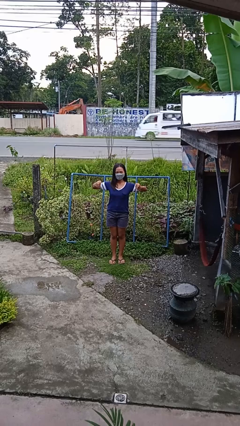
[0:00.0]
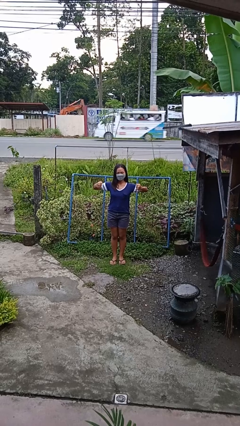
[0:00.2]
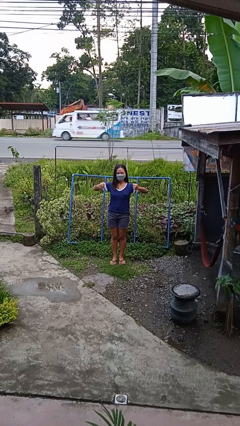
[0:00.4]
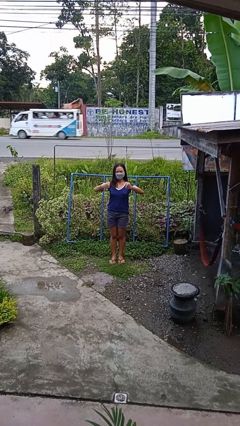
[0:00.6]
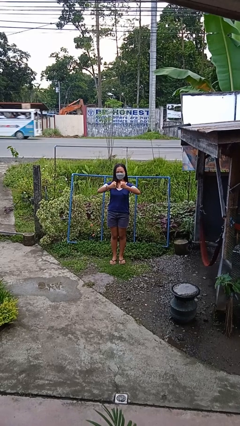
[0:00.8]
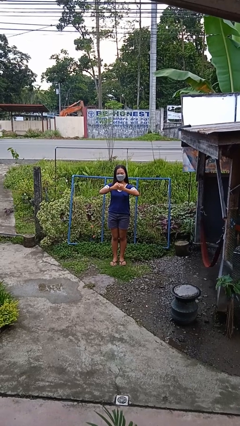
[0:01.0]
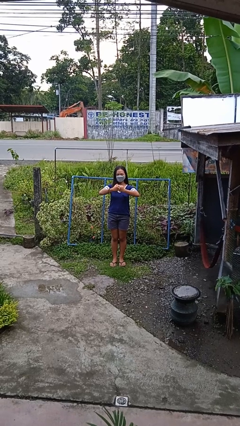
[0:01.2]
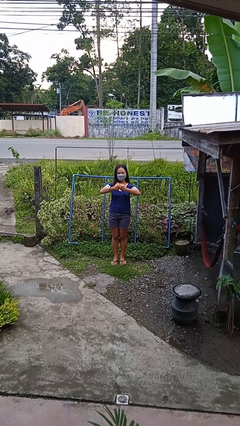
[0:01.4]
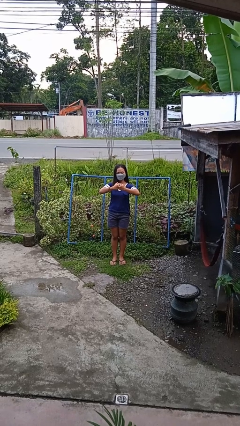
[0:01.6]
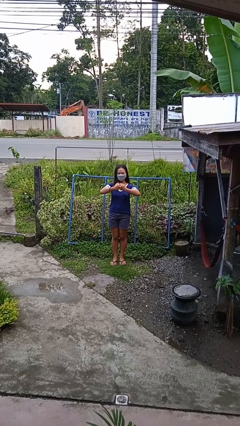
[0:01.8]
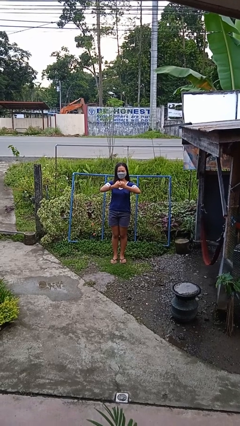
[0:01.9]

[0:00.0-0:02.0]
person gestures zoom out

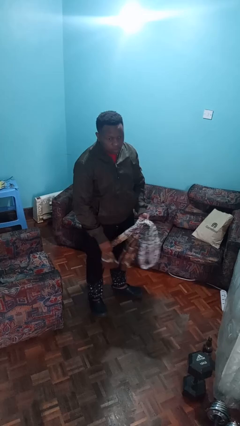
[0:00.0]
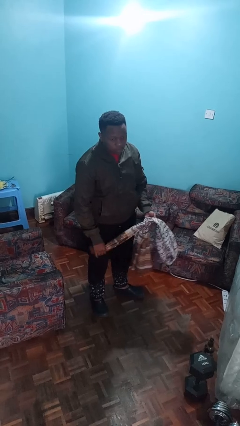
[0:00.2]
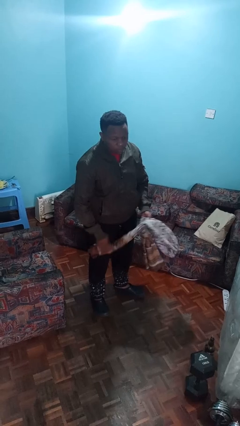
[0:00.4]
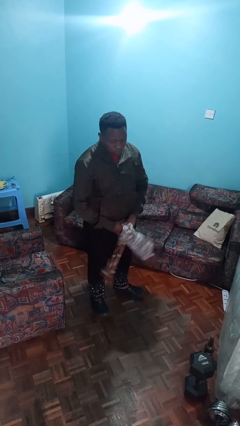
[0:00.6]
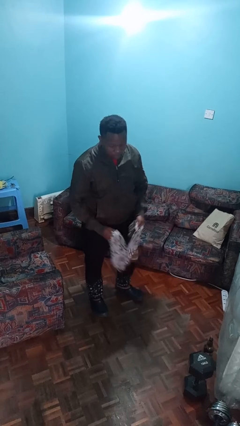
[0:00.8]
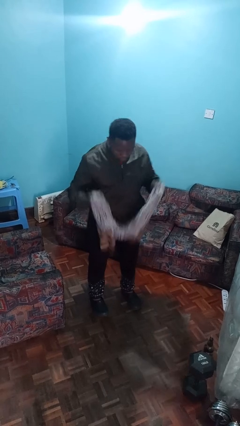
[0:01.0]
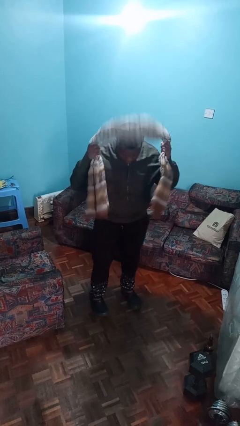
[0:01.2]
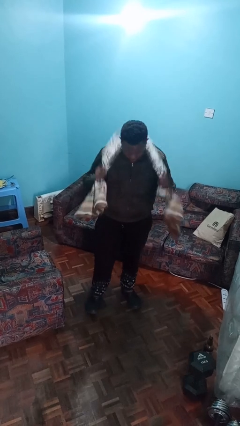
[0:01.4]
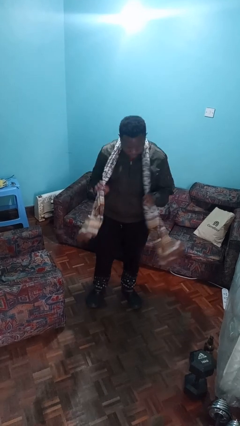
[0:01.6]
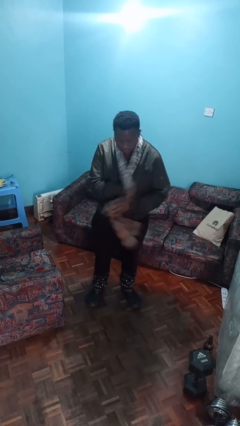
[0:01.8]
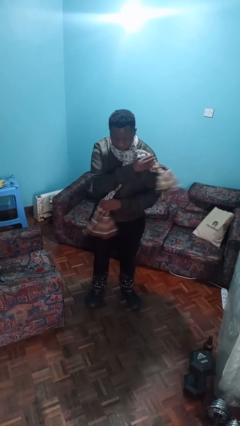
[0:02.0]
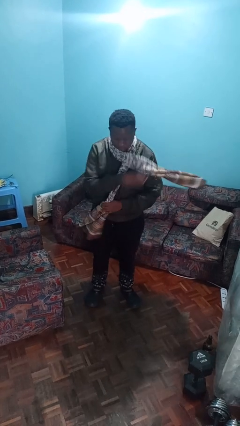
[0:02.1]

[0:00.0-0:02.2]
person puts on scarf

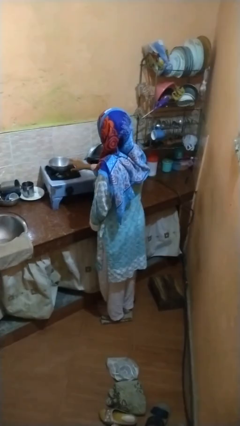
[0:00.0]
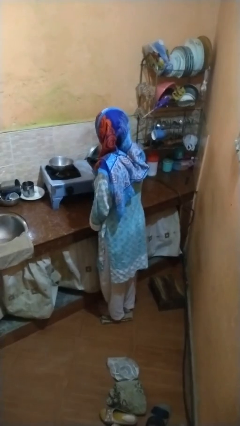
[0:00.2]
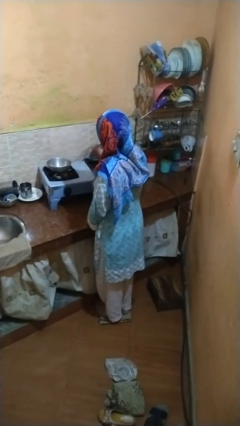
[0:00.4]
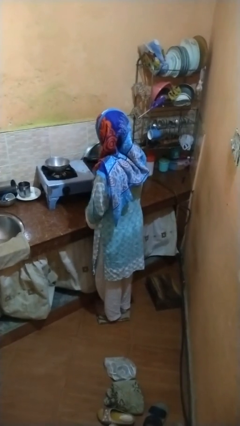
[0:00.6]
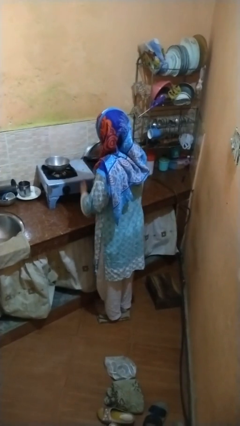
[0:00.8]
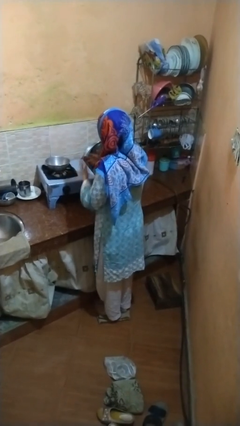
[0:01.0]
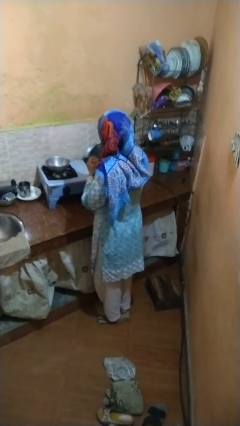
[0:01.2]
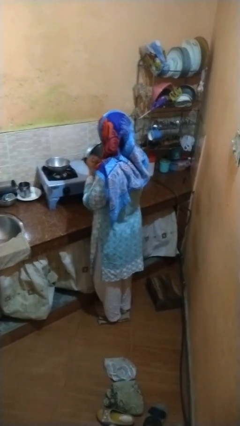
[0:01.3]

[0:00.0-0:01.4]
person burns hand

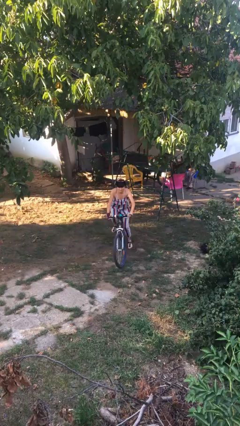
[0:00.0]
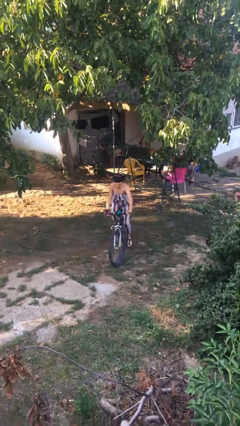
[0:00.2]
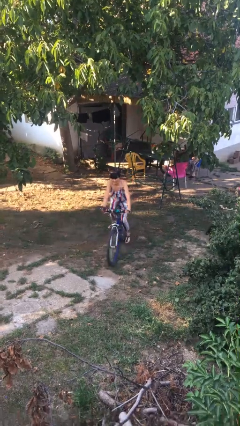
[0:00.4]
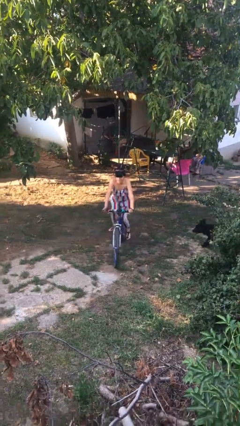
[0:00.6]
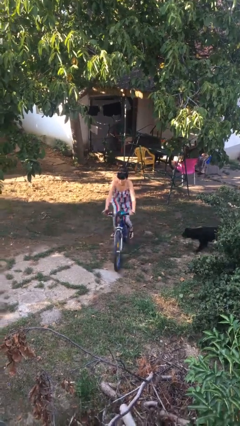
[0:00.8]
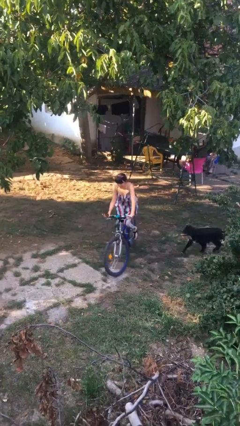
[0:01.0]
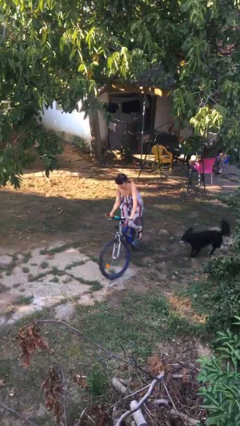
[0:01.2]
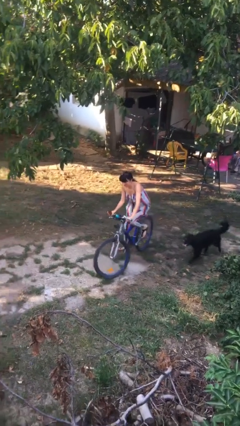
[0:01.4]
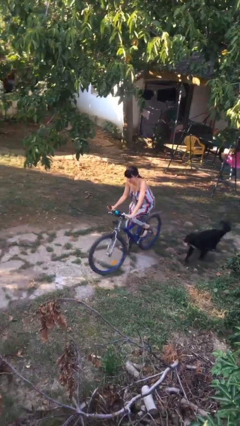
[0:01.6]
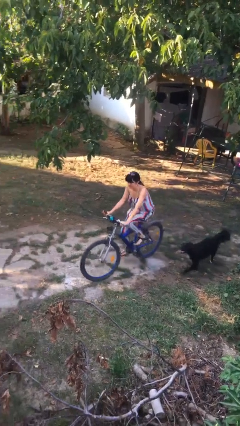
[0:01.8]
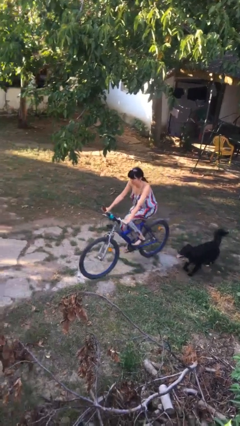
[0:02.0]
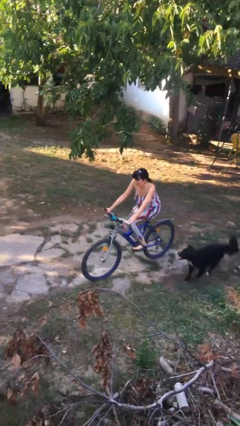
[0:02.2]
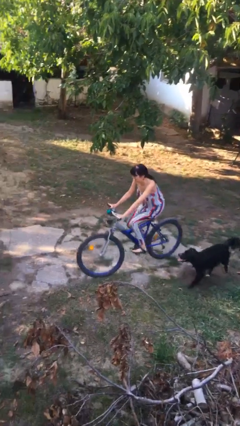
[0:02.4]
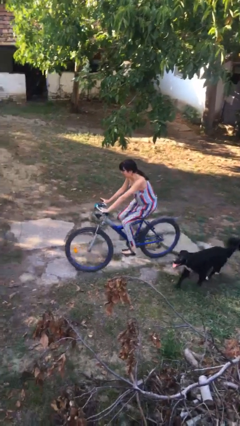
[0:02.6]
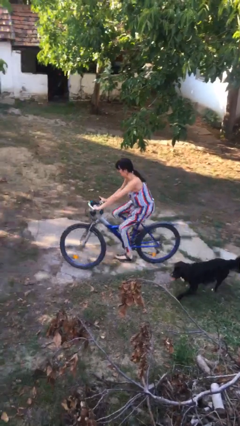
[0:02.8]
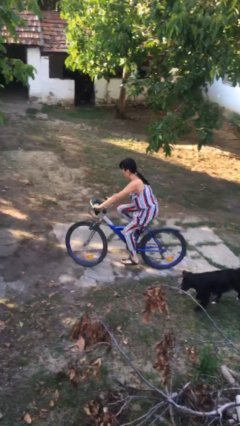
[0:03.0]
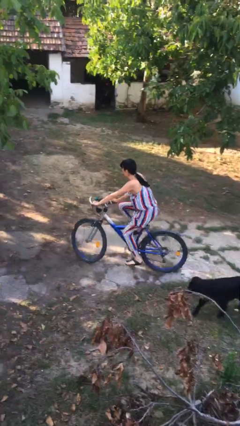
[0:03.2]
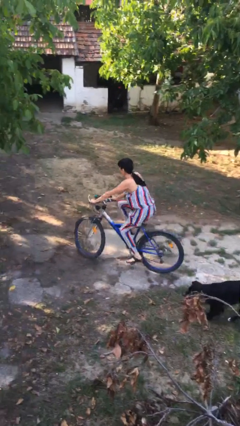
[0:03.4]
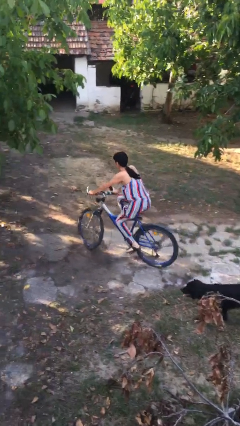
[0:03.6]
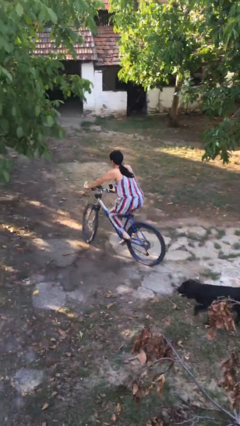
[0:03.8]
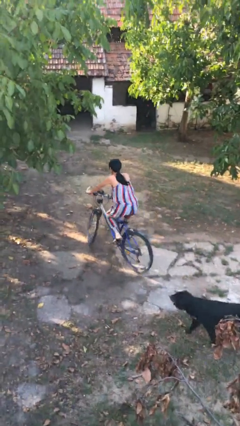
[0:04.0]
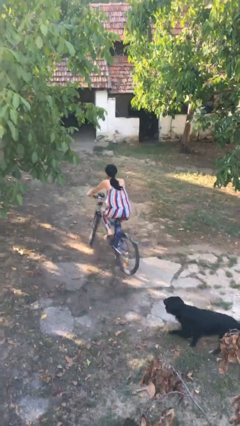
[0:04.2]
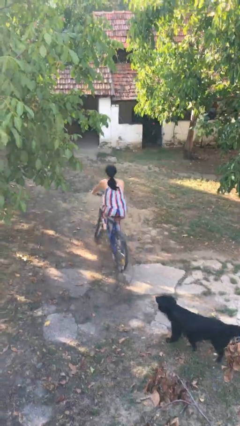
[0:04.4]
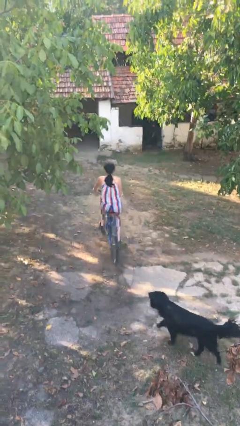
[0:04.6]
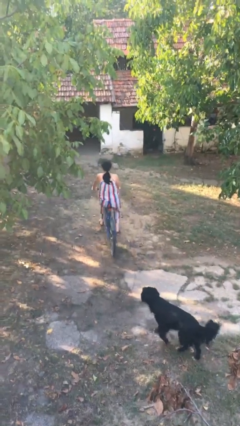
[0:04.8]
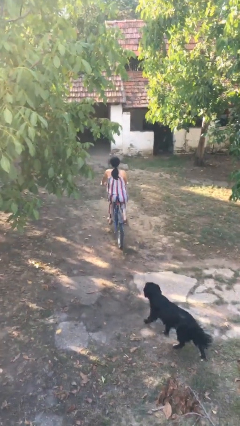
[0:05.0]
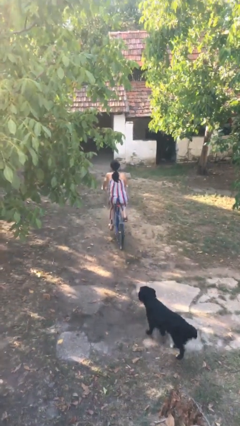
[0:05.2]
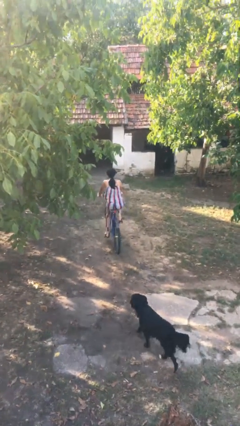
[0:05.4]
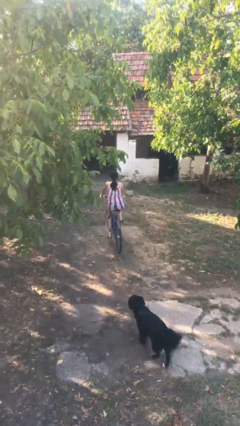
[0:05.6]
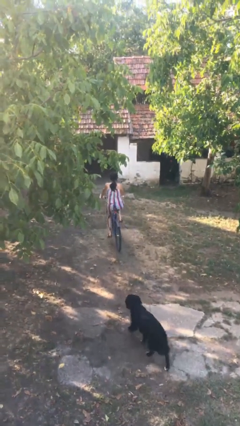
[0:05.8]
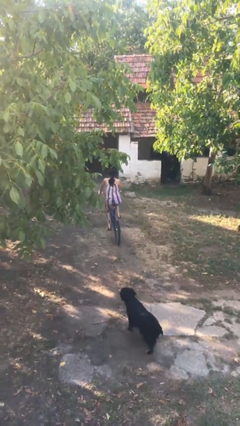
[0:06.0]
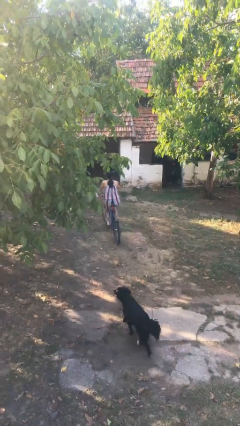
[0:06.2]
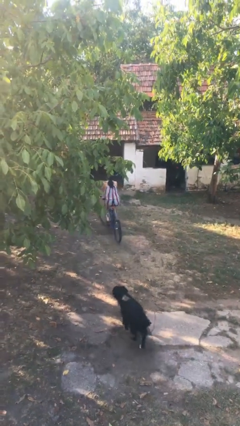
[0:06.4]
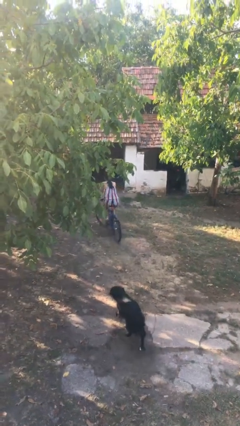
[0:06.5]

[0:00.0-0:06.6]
person rides bicycle

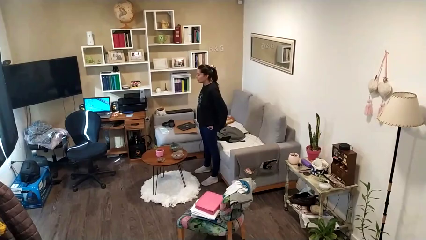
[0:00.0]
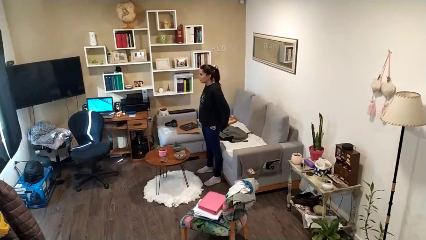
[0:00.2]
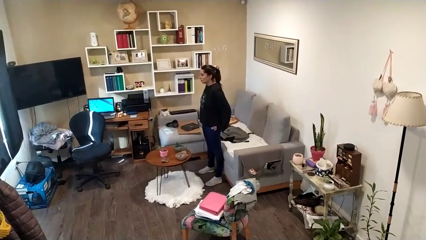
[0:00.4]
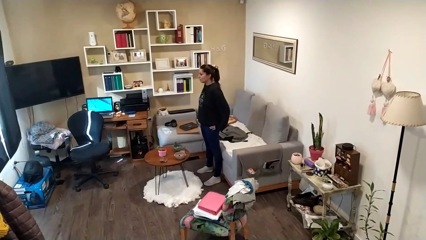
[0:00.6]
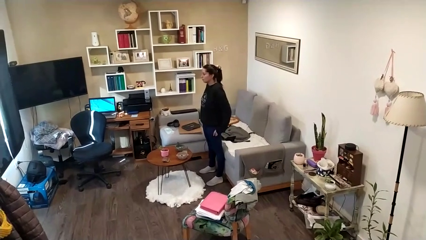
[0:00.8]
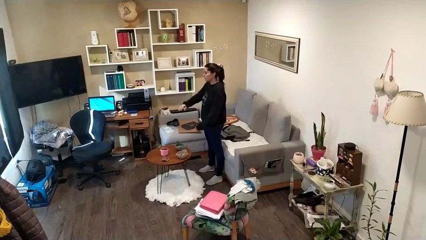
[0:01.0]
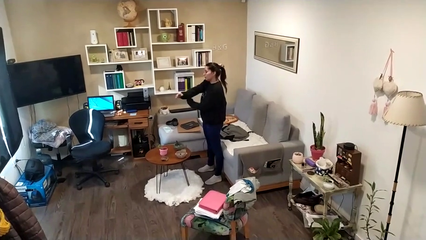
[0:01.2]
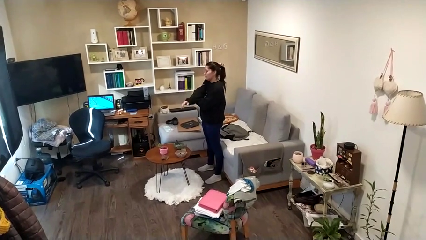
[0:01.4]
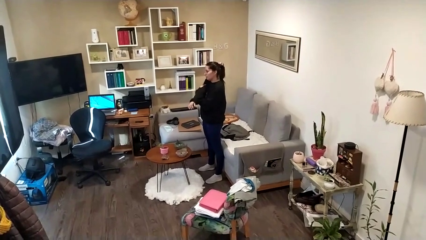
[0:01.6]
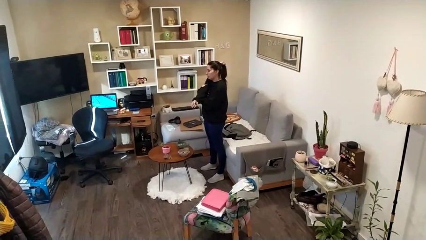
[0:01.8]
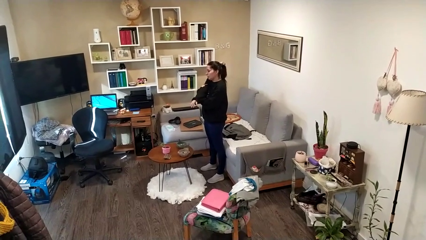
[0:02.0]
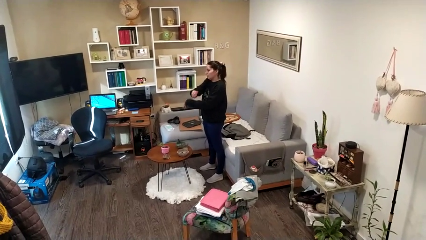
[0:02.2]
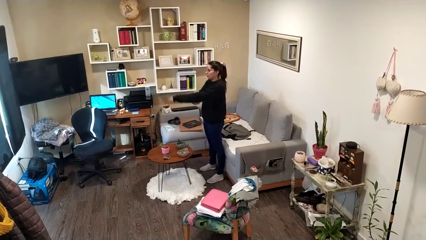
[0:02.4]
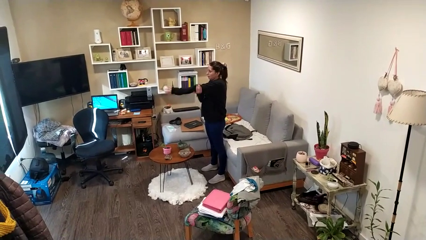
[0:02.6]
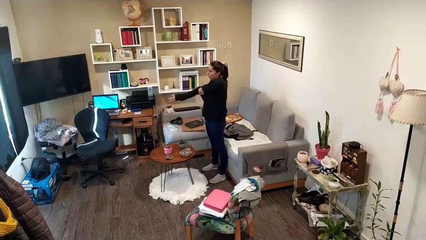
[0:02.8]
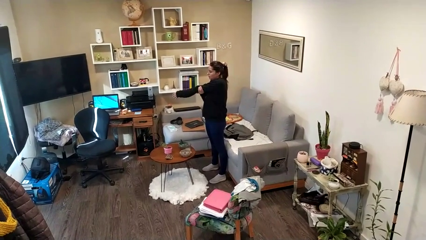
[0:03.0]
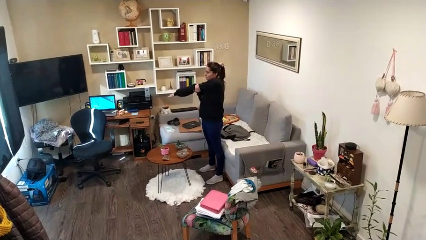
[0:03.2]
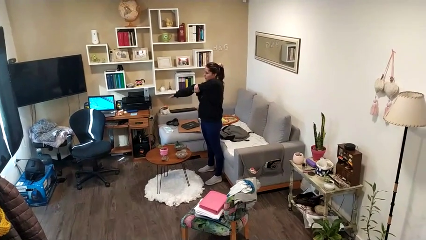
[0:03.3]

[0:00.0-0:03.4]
person stretches arms to side

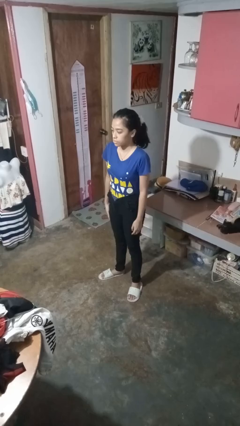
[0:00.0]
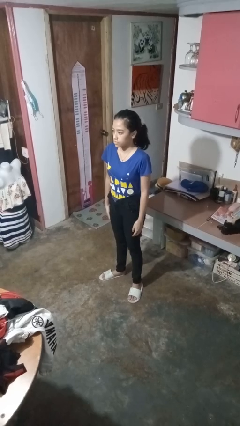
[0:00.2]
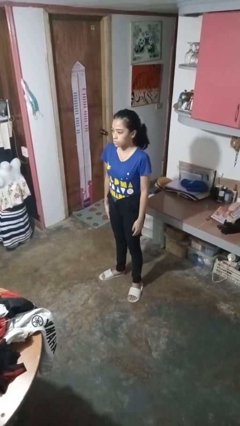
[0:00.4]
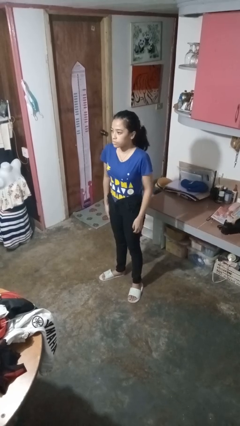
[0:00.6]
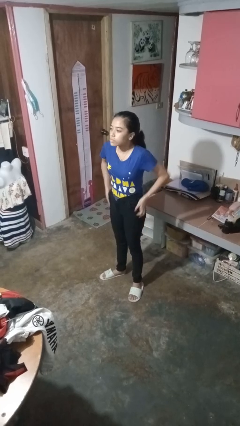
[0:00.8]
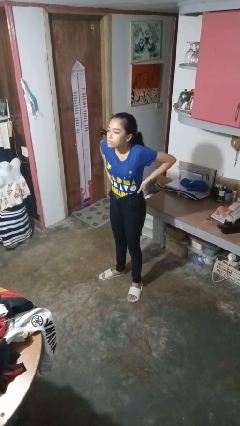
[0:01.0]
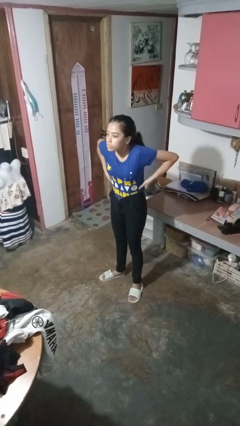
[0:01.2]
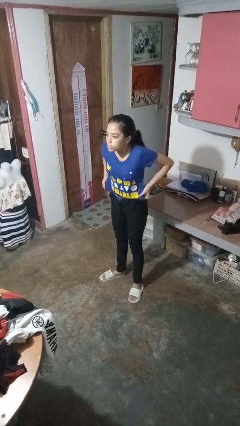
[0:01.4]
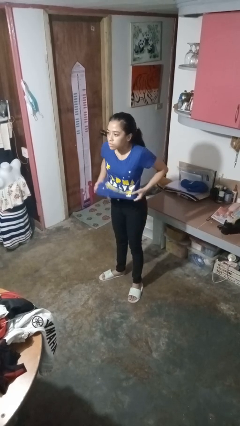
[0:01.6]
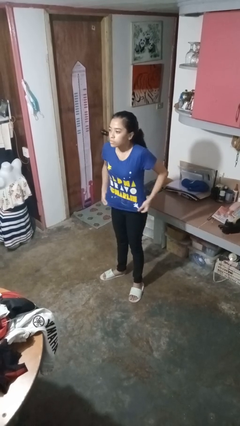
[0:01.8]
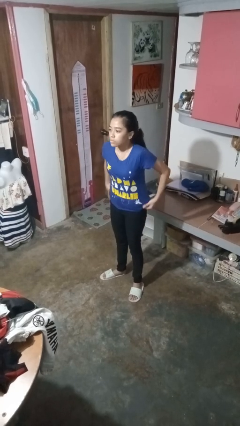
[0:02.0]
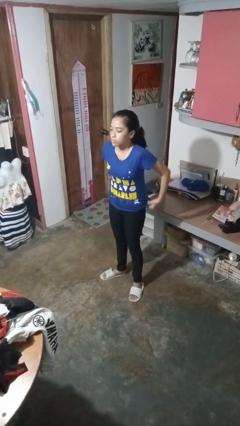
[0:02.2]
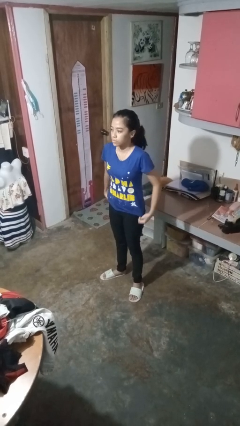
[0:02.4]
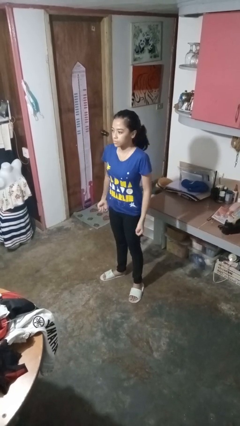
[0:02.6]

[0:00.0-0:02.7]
person untucks shirt
